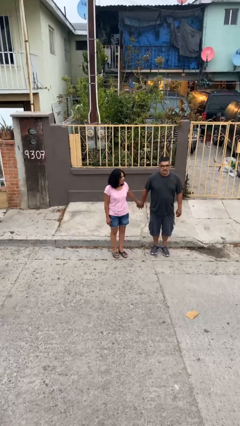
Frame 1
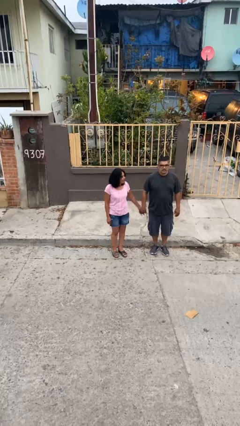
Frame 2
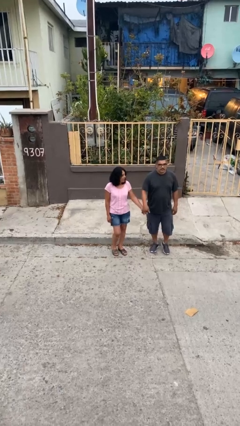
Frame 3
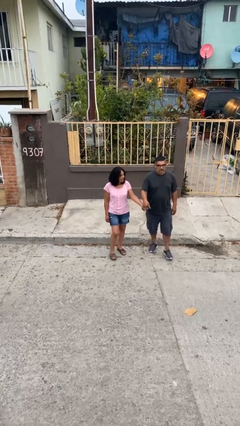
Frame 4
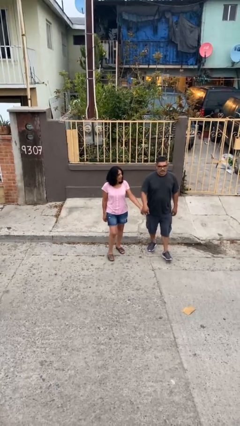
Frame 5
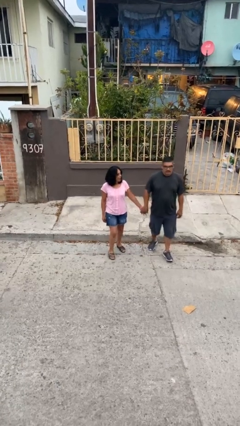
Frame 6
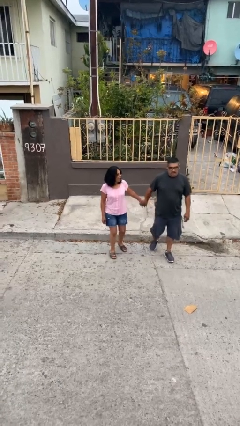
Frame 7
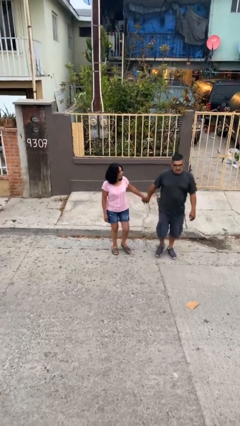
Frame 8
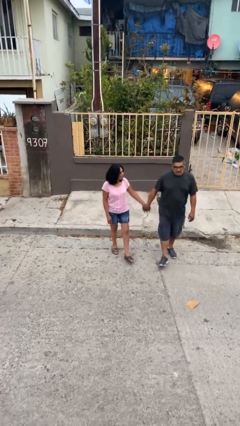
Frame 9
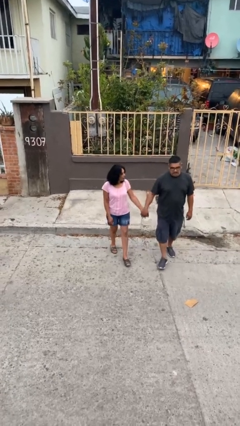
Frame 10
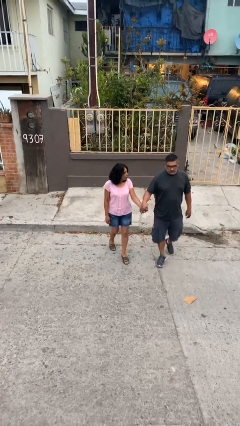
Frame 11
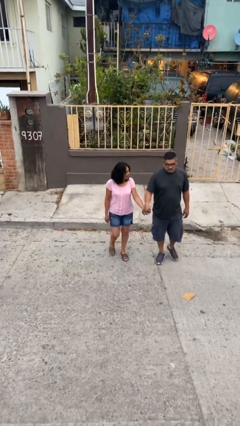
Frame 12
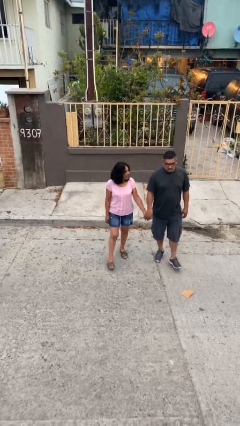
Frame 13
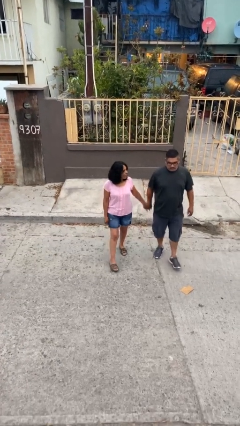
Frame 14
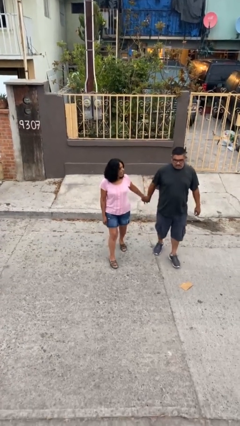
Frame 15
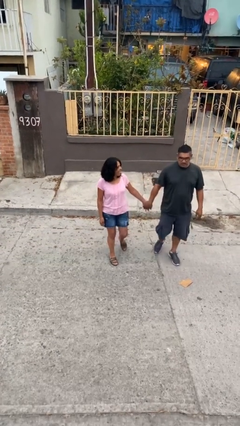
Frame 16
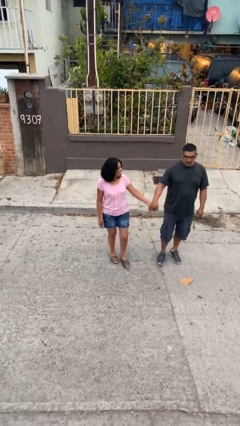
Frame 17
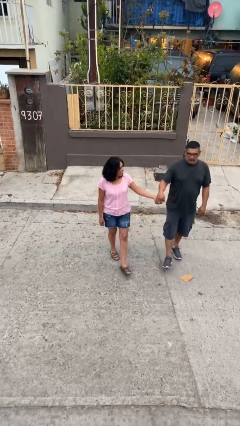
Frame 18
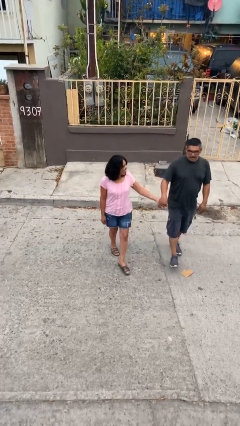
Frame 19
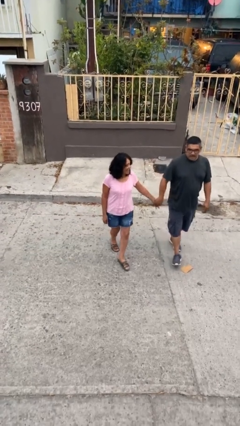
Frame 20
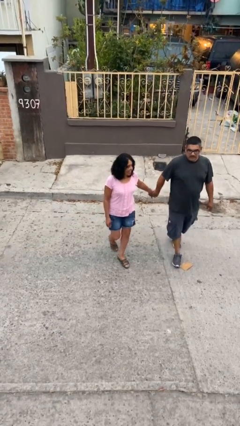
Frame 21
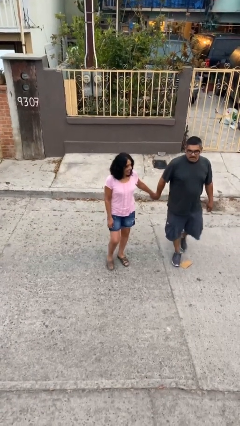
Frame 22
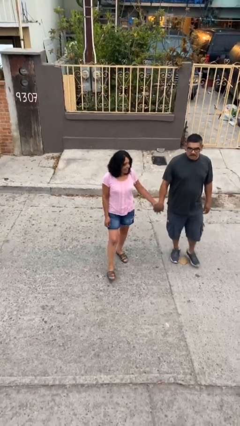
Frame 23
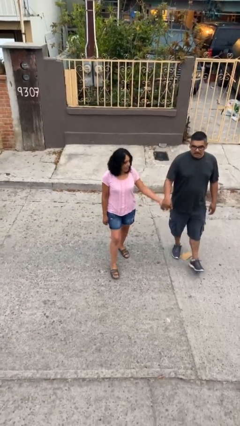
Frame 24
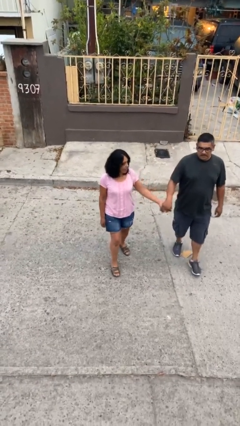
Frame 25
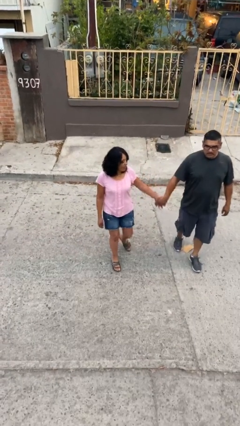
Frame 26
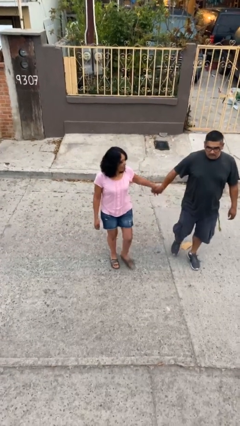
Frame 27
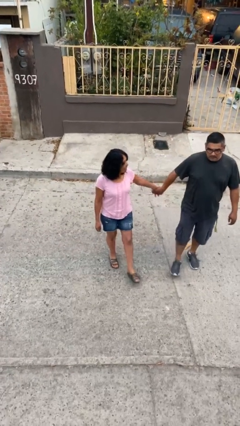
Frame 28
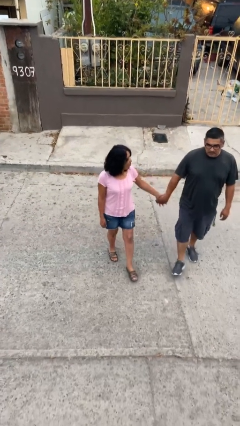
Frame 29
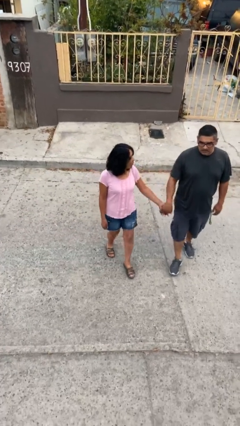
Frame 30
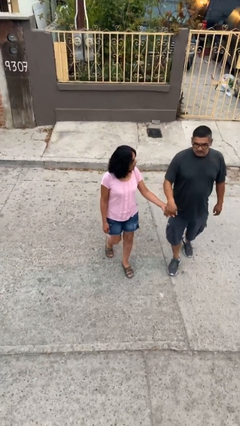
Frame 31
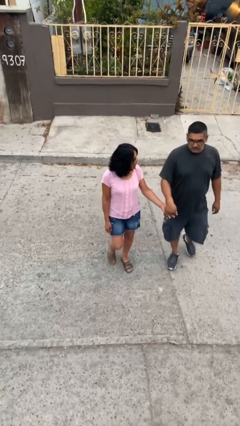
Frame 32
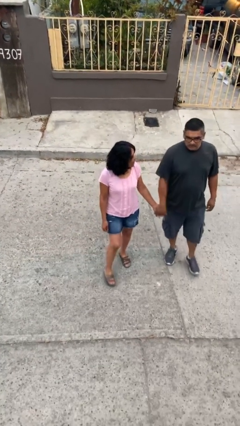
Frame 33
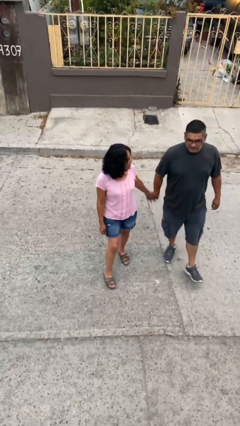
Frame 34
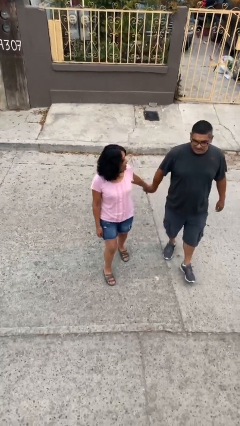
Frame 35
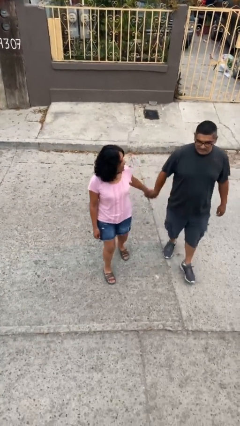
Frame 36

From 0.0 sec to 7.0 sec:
person holds hand

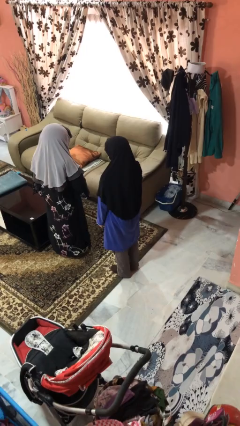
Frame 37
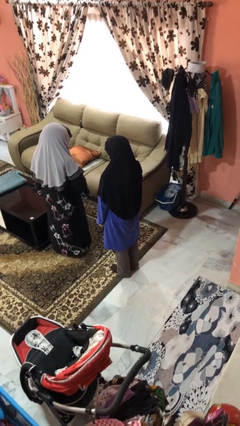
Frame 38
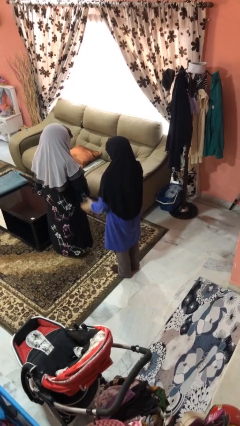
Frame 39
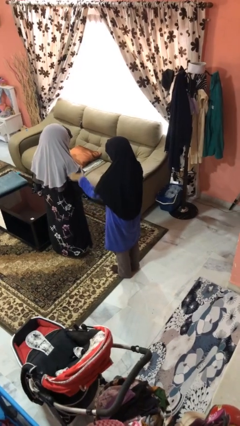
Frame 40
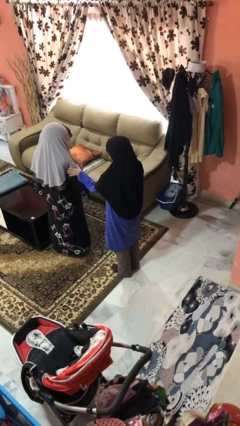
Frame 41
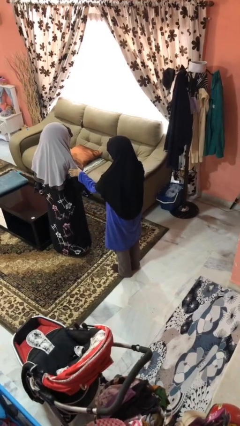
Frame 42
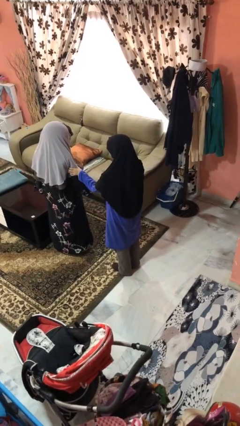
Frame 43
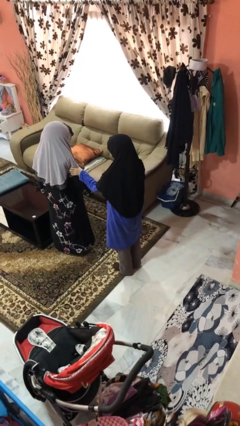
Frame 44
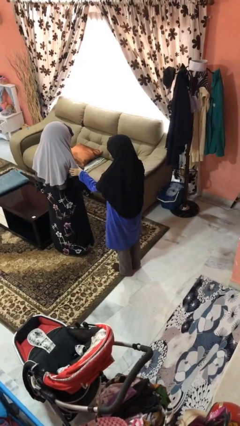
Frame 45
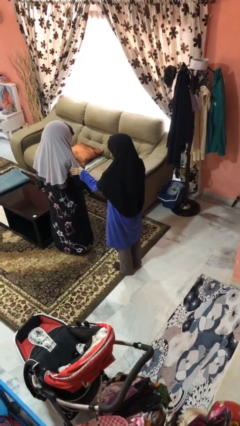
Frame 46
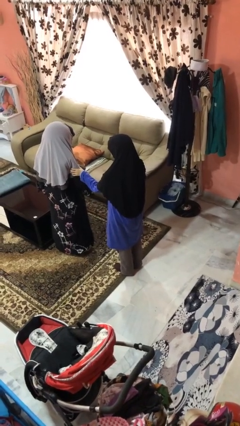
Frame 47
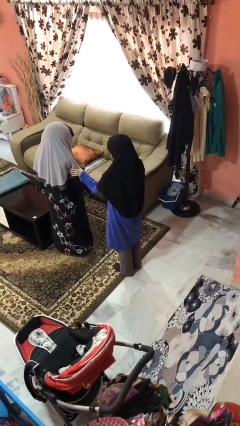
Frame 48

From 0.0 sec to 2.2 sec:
person grabs person by bicep

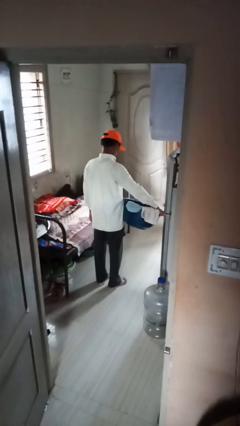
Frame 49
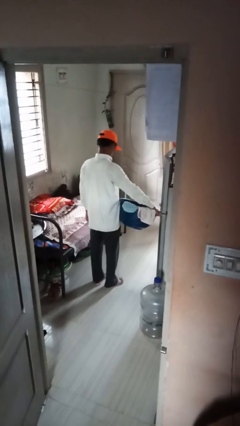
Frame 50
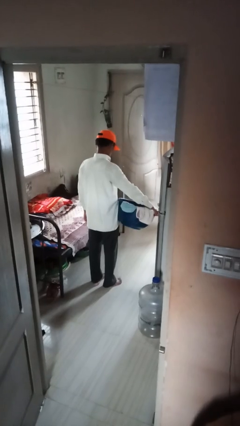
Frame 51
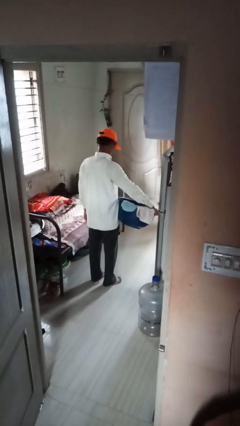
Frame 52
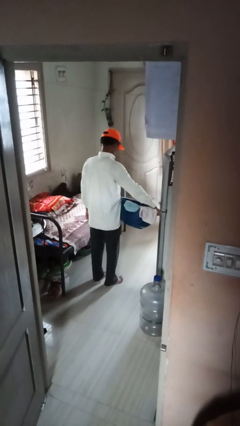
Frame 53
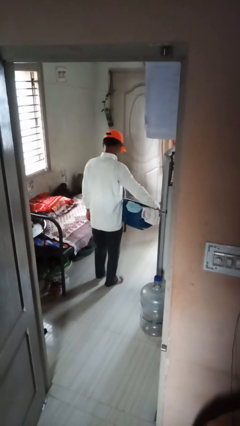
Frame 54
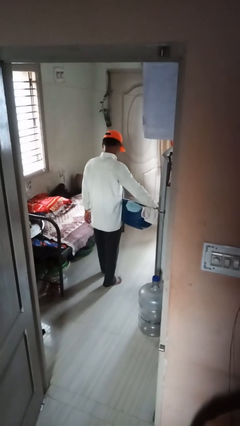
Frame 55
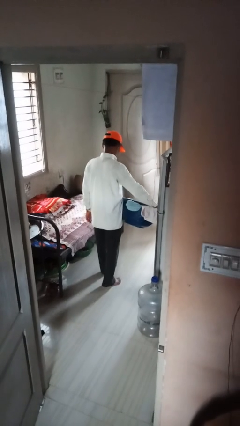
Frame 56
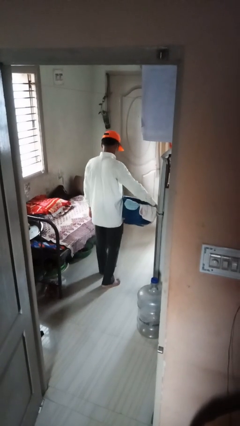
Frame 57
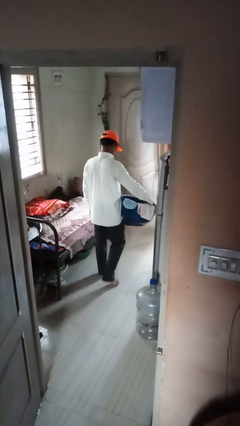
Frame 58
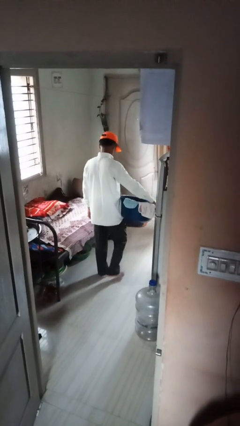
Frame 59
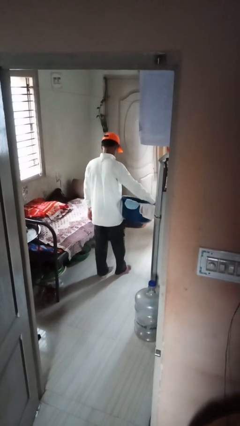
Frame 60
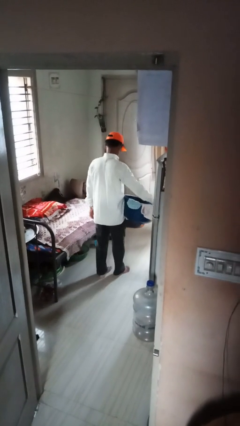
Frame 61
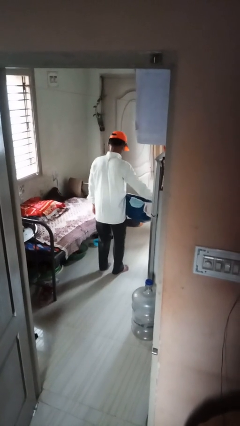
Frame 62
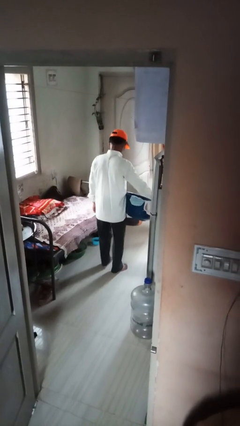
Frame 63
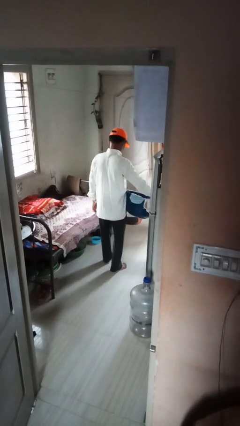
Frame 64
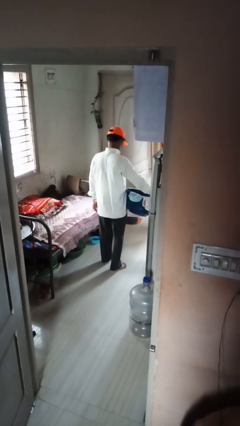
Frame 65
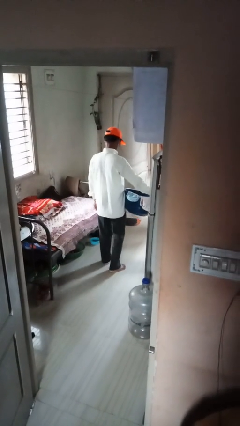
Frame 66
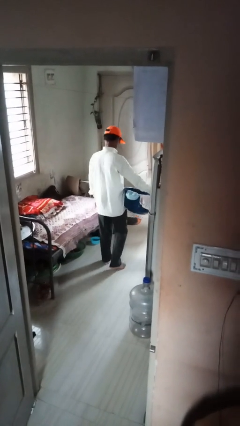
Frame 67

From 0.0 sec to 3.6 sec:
person carries laundry basket

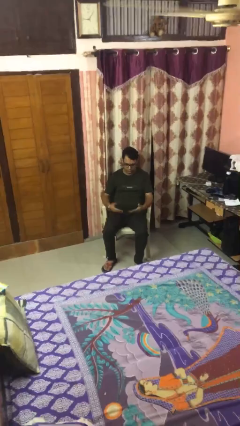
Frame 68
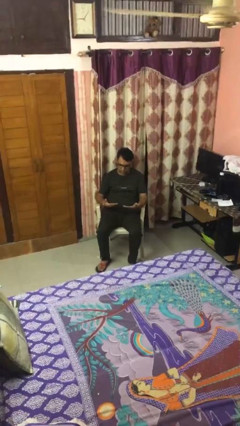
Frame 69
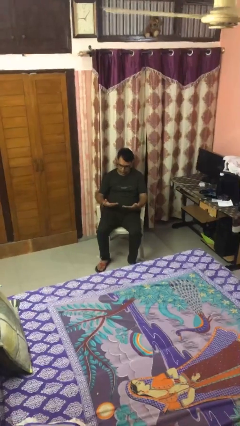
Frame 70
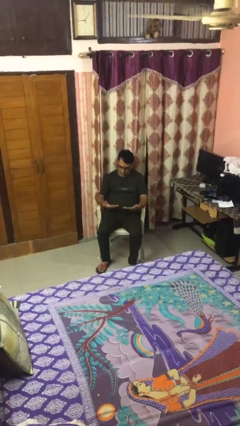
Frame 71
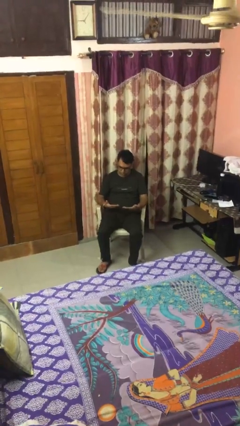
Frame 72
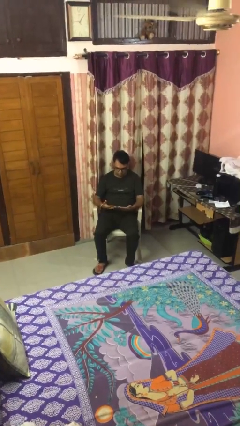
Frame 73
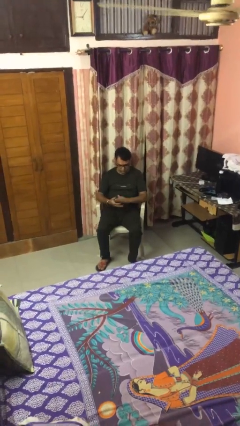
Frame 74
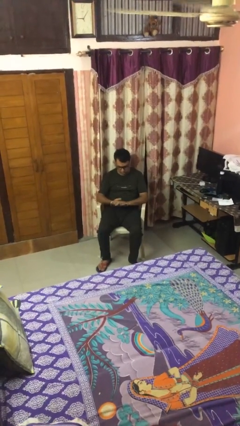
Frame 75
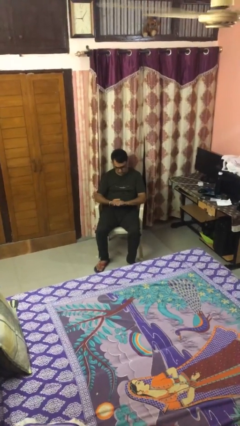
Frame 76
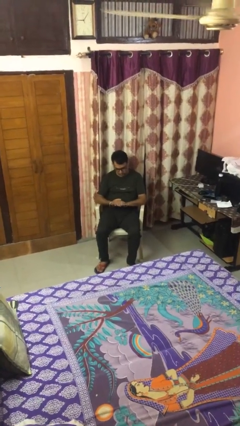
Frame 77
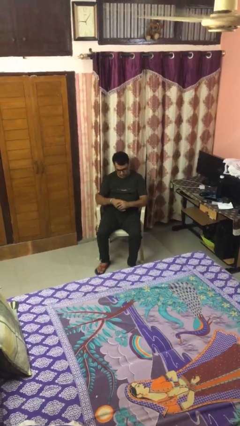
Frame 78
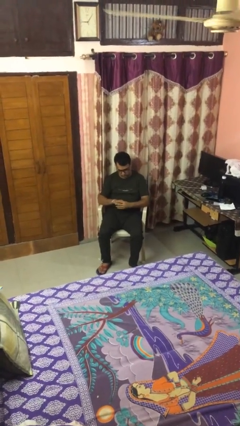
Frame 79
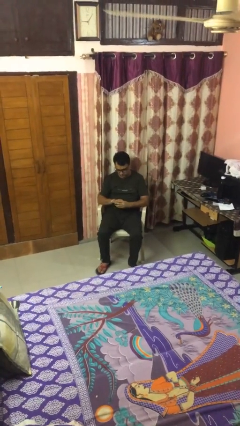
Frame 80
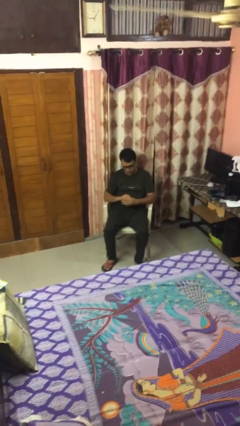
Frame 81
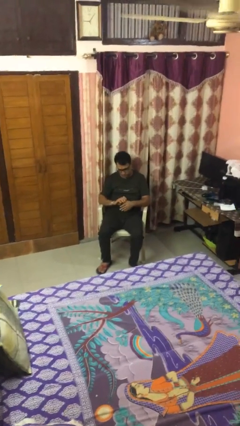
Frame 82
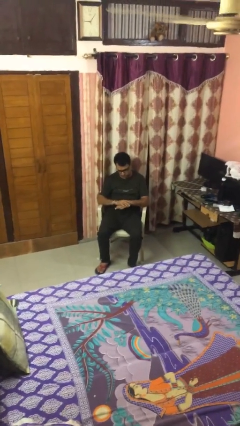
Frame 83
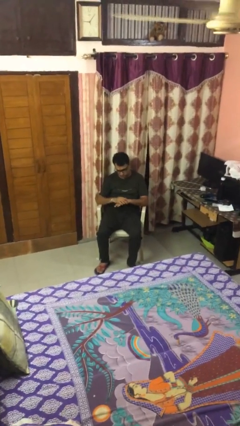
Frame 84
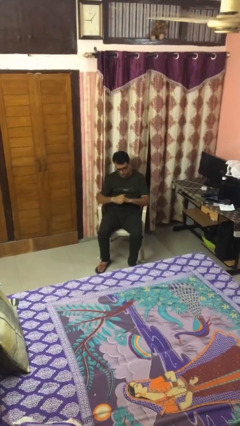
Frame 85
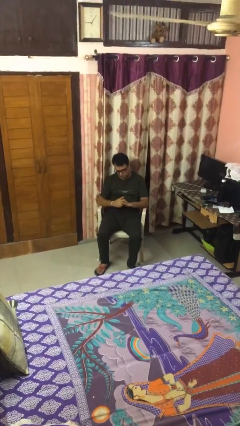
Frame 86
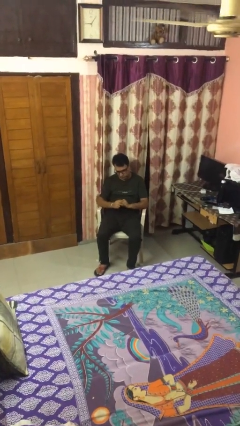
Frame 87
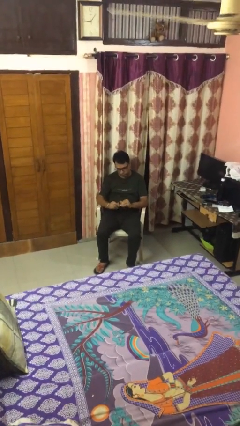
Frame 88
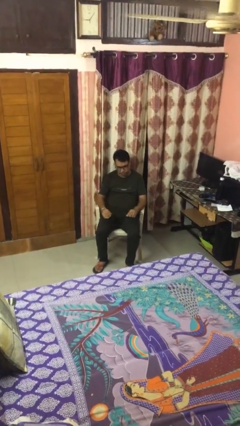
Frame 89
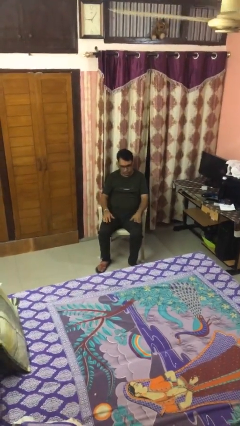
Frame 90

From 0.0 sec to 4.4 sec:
person looks at hands in lap

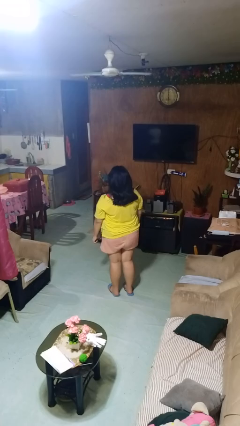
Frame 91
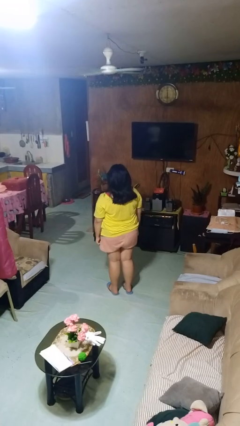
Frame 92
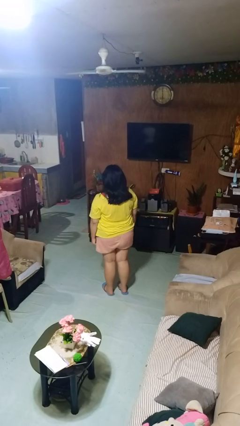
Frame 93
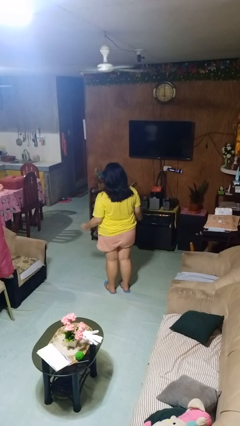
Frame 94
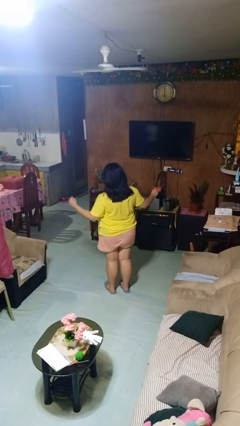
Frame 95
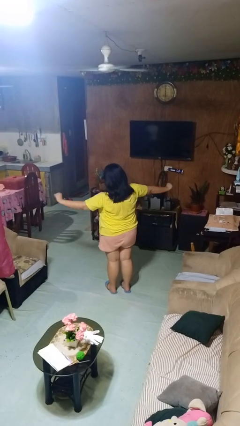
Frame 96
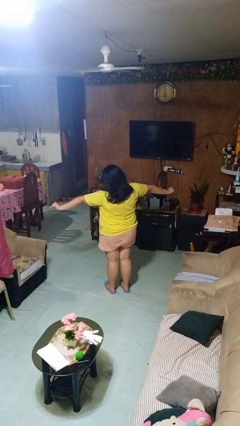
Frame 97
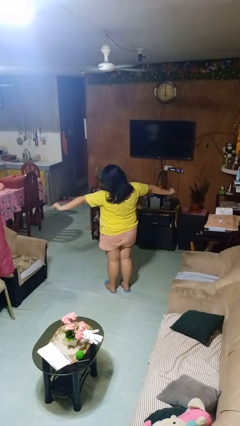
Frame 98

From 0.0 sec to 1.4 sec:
person stretches arms to side
